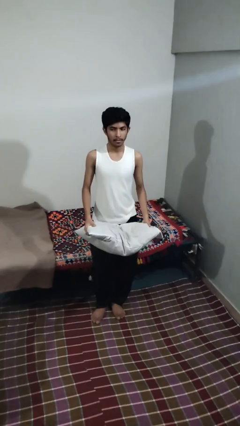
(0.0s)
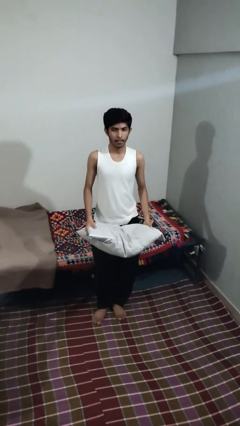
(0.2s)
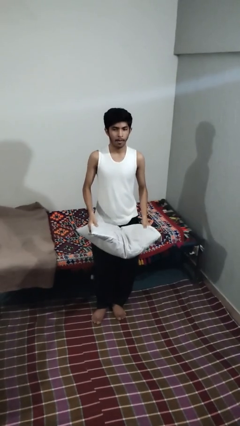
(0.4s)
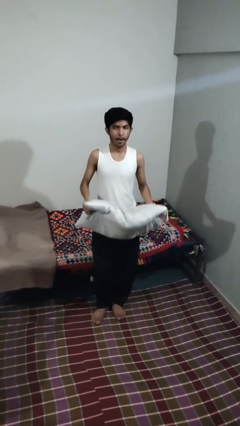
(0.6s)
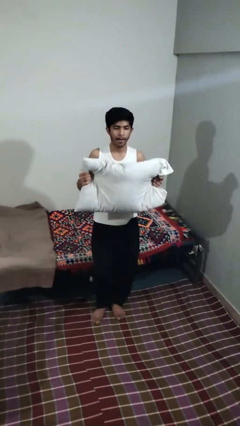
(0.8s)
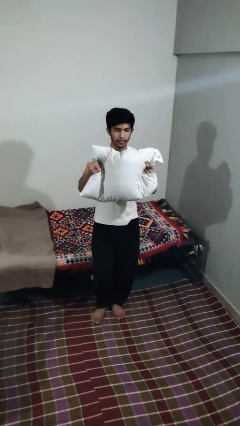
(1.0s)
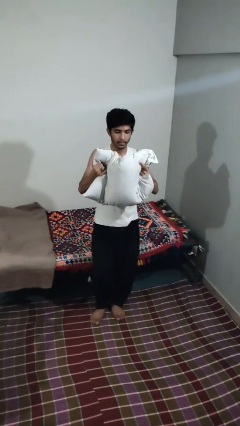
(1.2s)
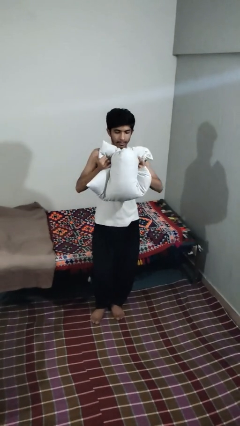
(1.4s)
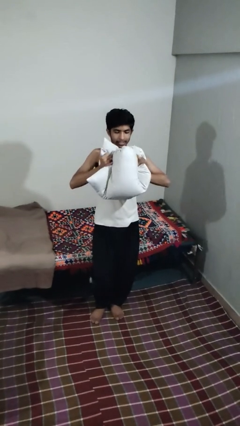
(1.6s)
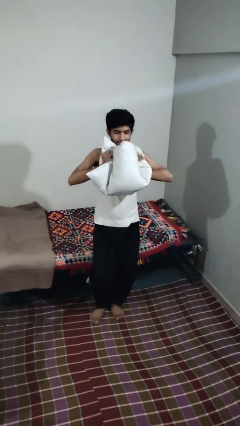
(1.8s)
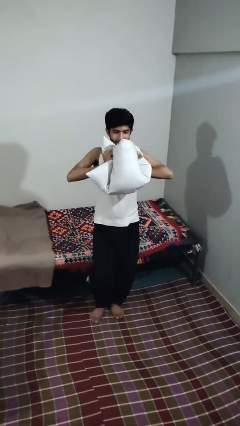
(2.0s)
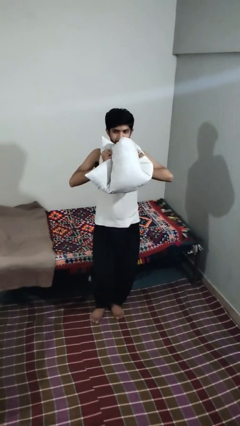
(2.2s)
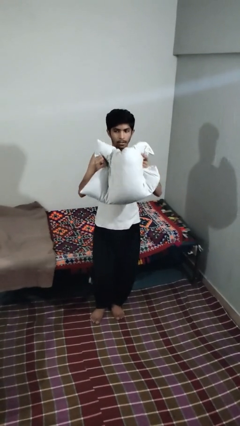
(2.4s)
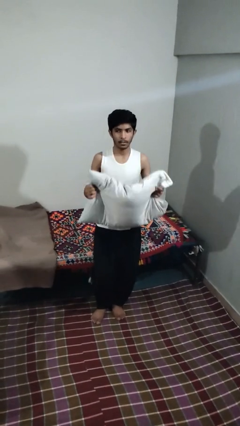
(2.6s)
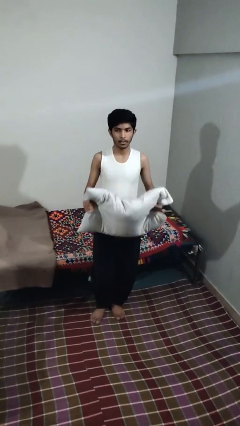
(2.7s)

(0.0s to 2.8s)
person squeezes object

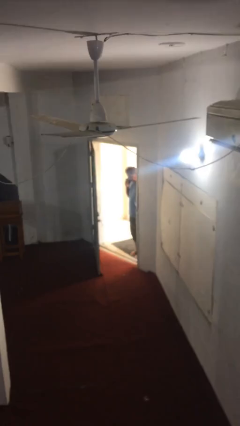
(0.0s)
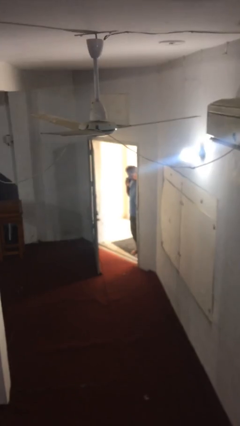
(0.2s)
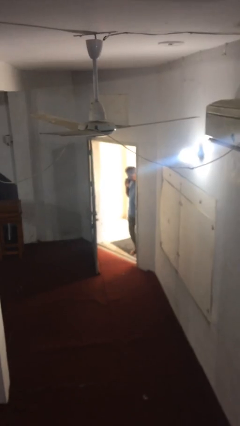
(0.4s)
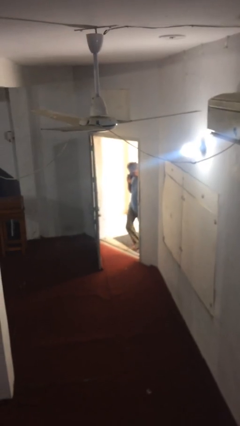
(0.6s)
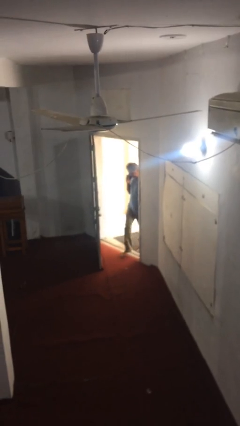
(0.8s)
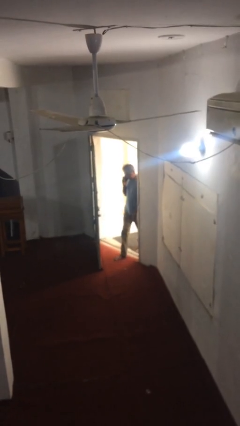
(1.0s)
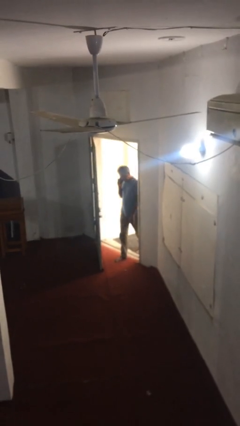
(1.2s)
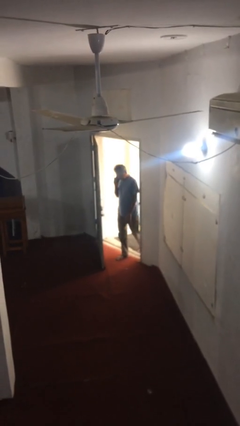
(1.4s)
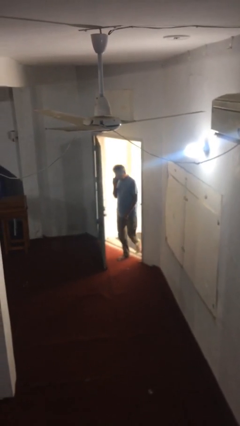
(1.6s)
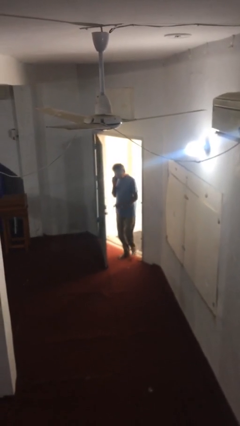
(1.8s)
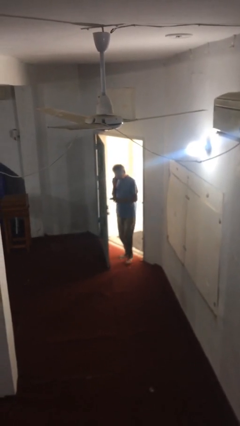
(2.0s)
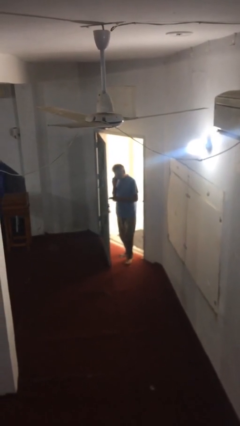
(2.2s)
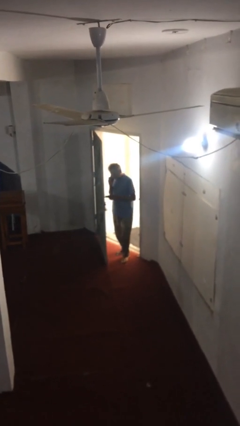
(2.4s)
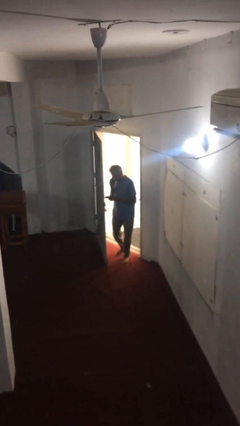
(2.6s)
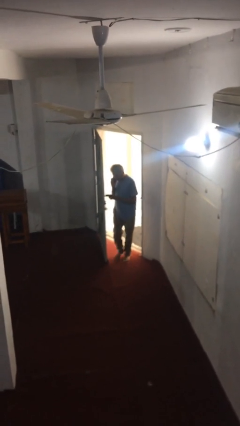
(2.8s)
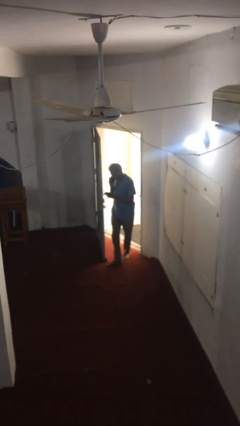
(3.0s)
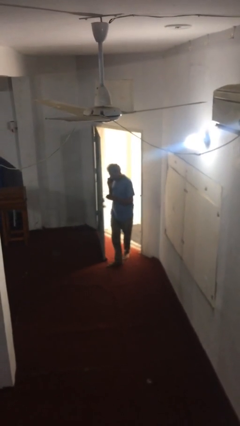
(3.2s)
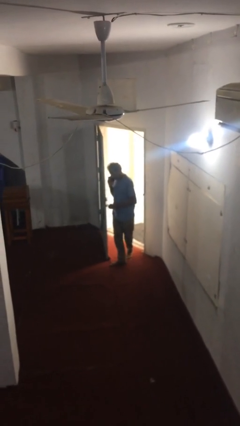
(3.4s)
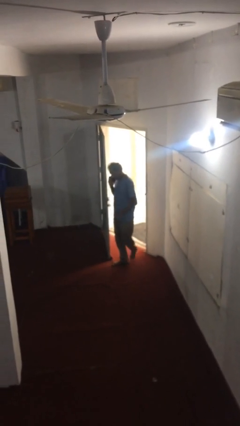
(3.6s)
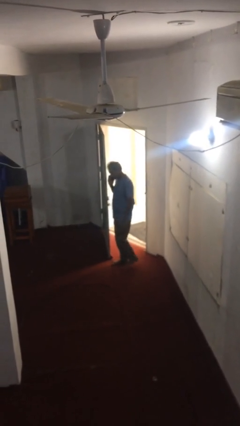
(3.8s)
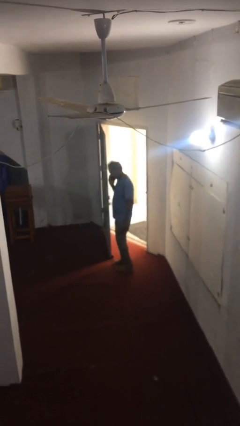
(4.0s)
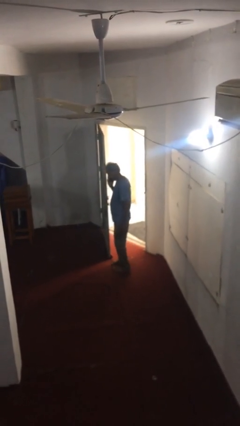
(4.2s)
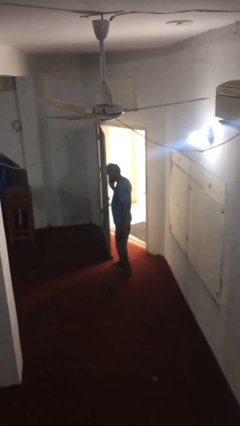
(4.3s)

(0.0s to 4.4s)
person enters scene through structure

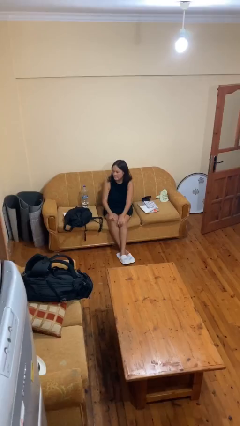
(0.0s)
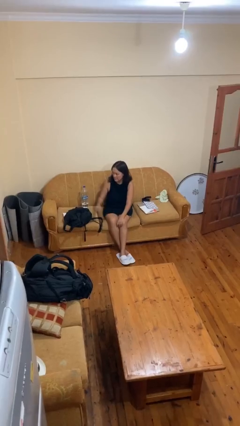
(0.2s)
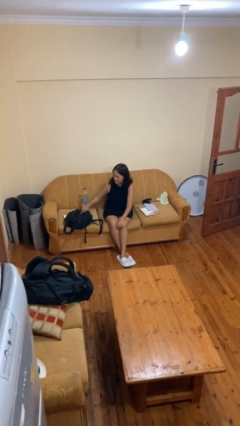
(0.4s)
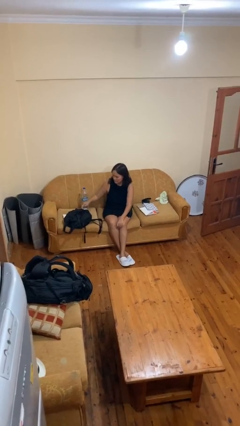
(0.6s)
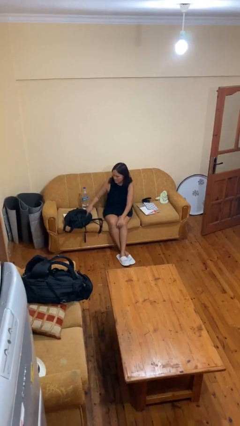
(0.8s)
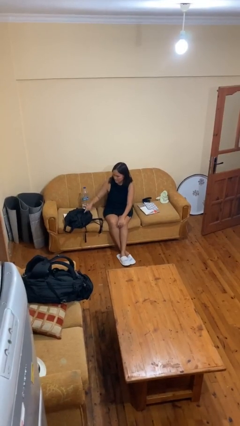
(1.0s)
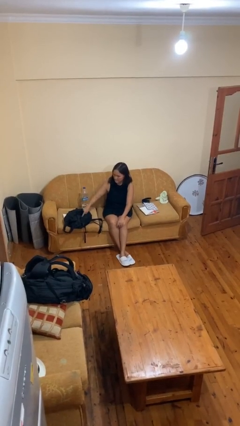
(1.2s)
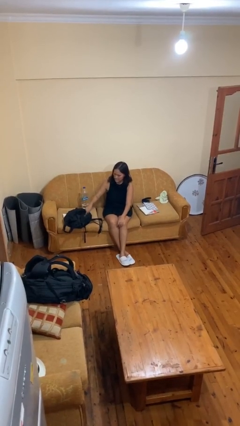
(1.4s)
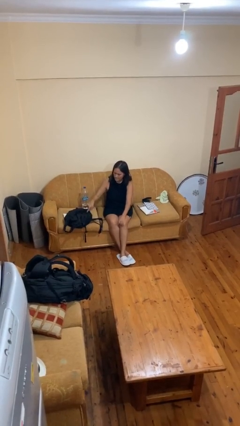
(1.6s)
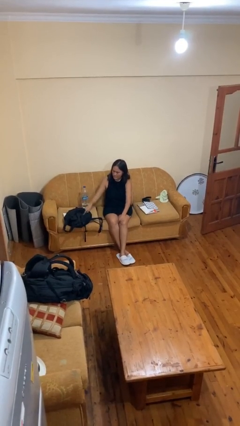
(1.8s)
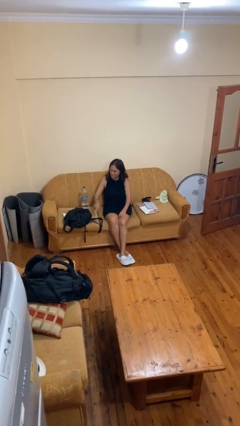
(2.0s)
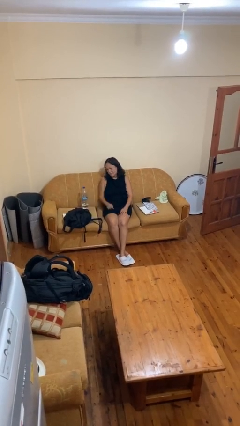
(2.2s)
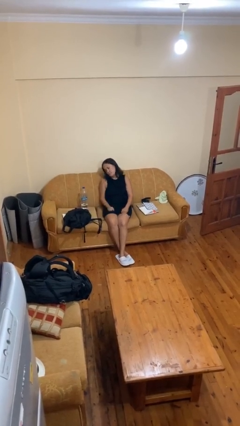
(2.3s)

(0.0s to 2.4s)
person taps object with finger

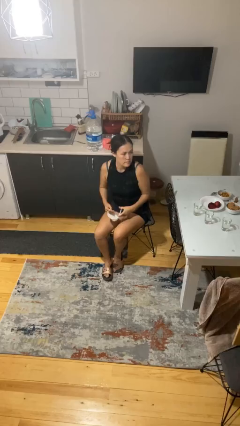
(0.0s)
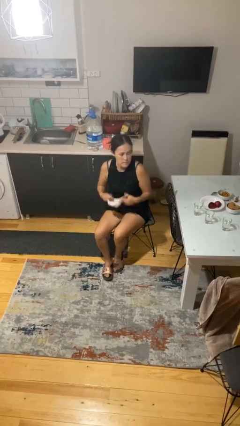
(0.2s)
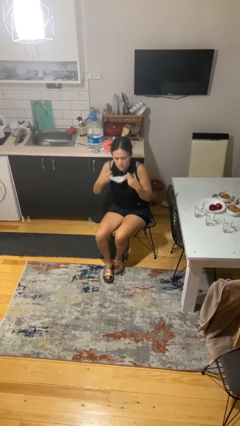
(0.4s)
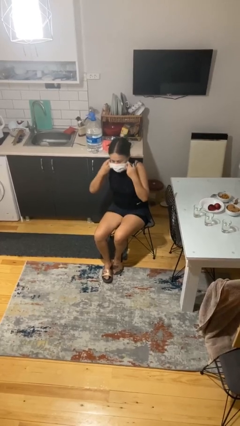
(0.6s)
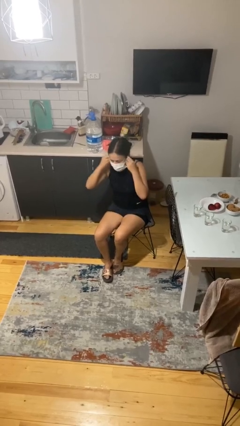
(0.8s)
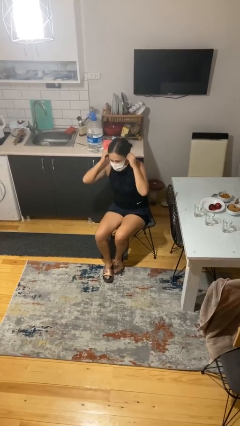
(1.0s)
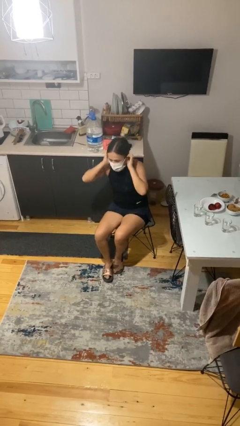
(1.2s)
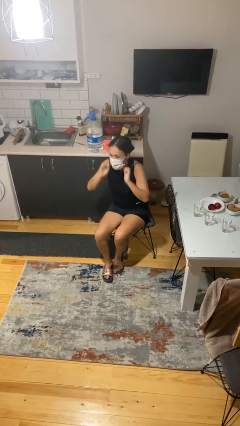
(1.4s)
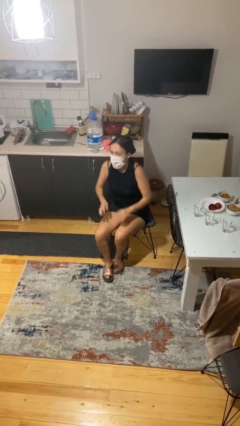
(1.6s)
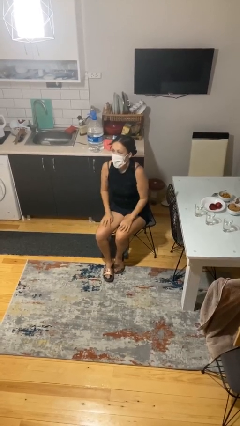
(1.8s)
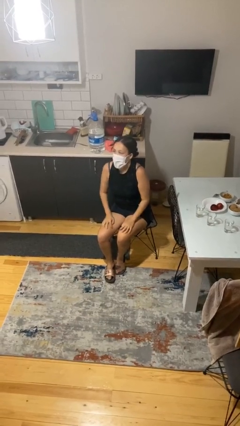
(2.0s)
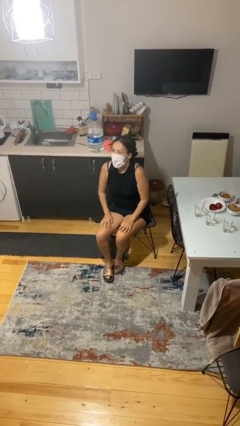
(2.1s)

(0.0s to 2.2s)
person puts on facemask

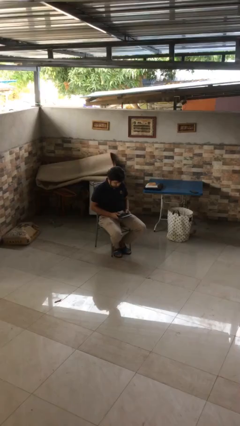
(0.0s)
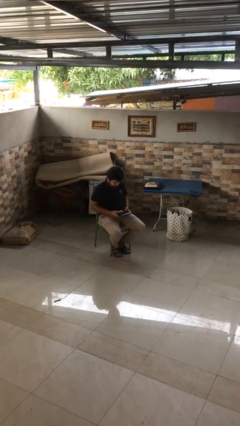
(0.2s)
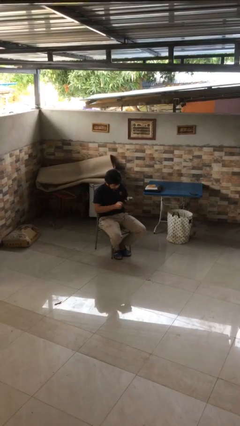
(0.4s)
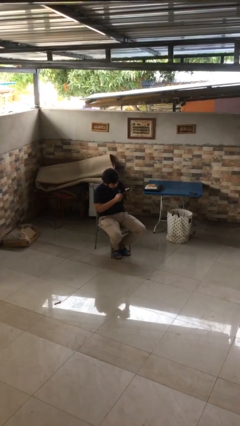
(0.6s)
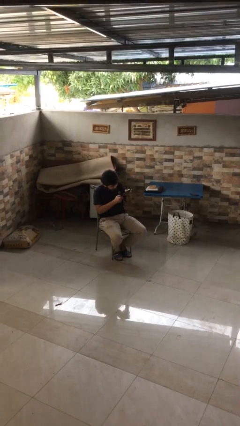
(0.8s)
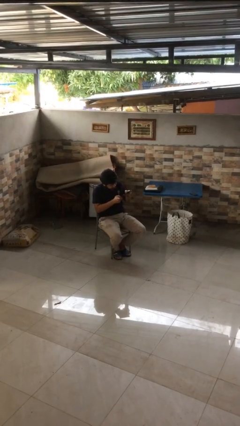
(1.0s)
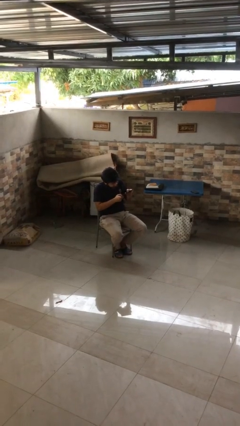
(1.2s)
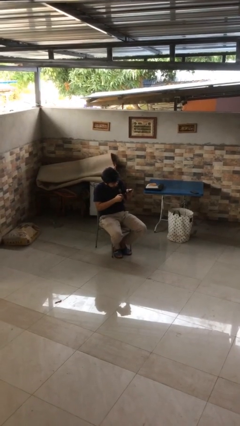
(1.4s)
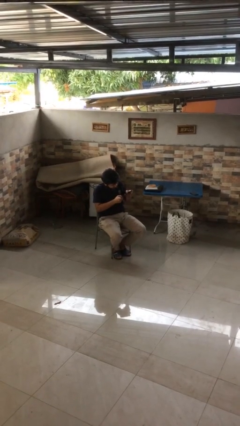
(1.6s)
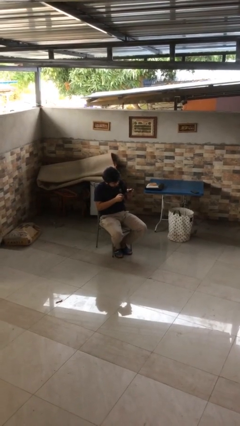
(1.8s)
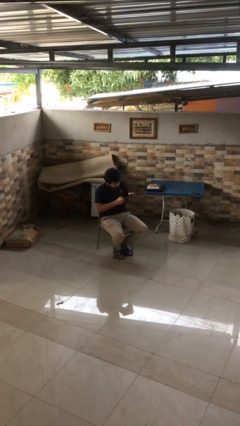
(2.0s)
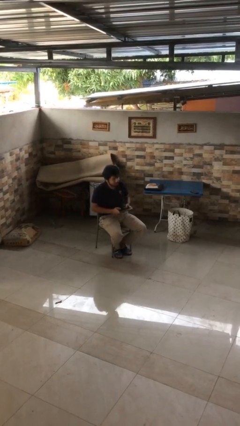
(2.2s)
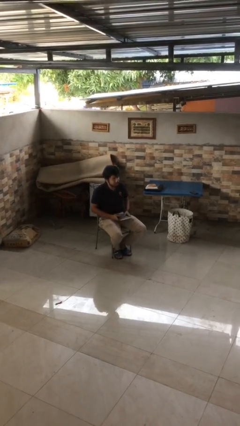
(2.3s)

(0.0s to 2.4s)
person interacts with handheld game

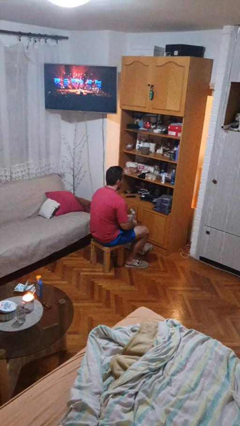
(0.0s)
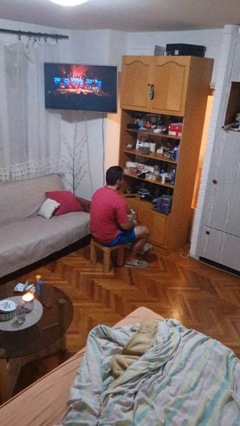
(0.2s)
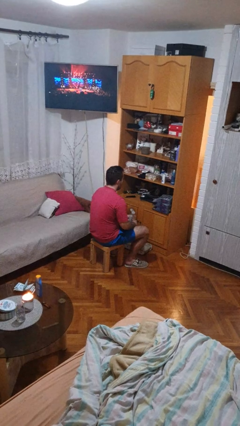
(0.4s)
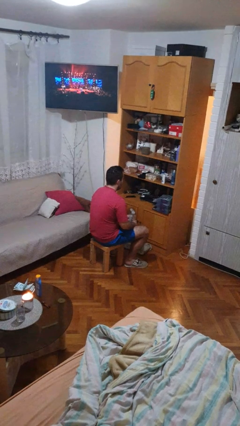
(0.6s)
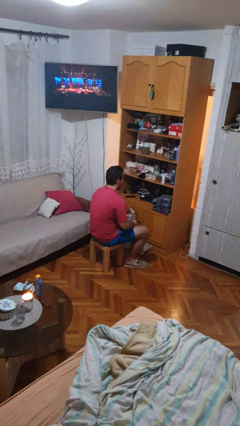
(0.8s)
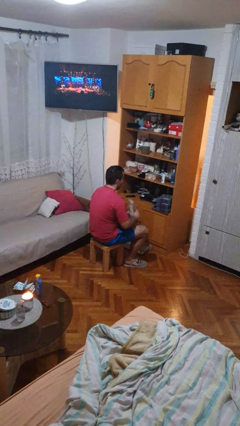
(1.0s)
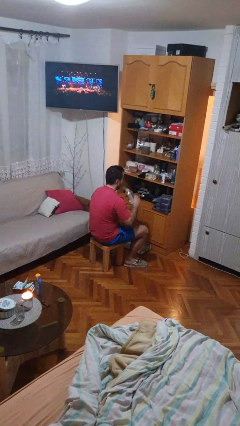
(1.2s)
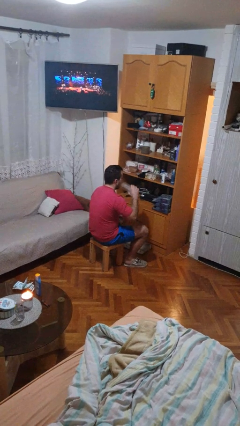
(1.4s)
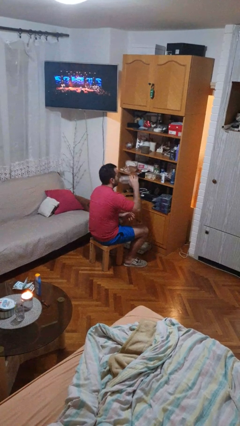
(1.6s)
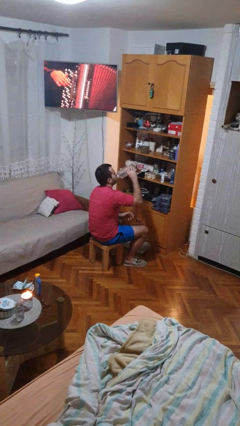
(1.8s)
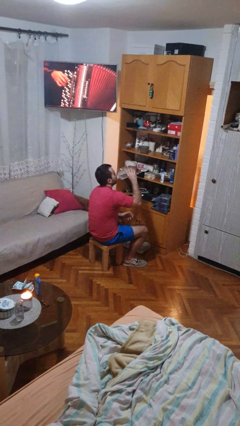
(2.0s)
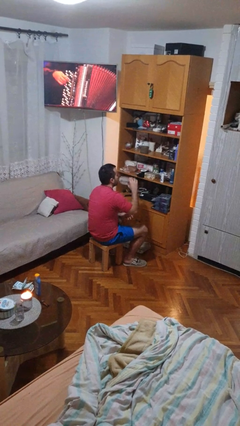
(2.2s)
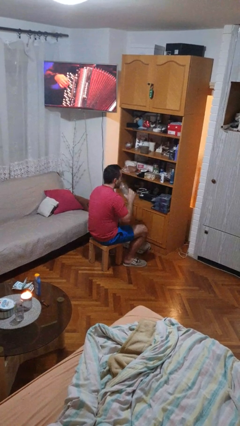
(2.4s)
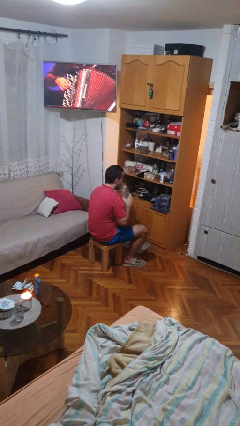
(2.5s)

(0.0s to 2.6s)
person drinks from bottle

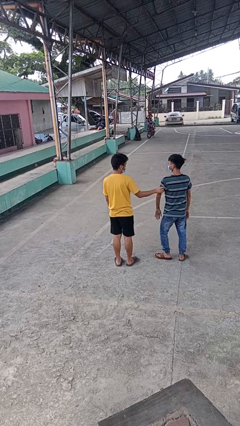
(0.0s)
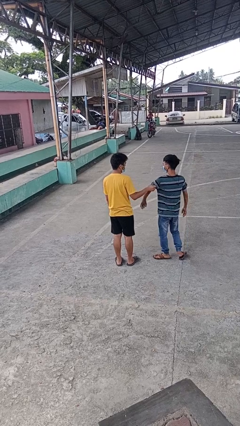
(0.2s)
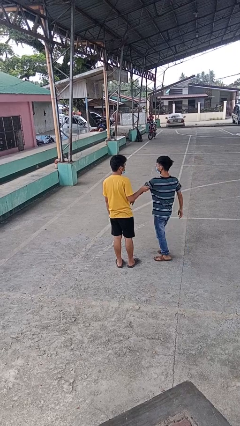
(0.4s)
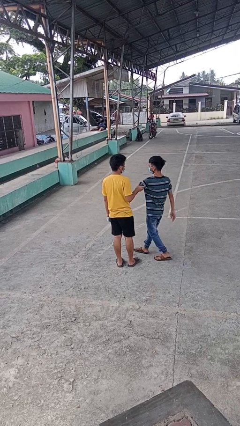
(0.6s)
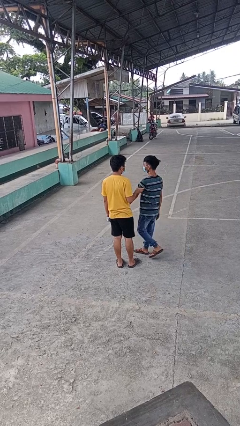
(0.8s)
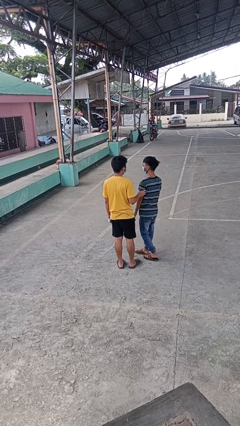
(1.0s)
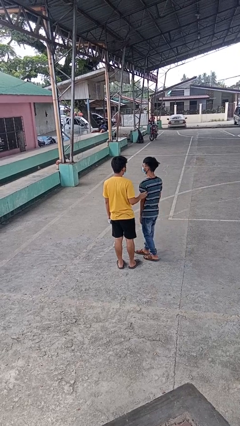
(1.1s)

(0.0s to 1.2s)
person grabs person by bicep
